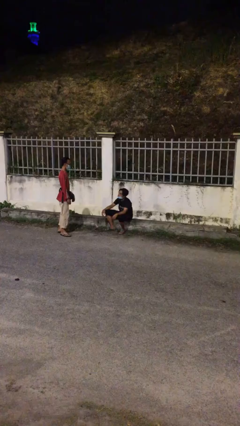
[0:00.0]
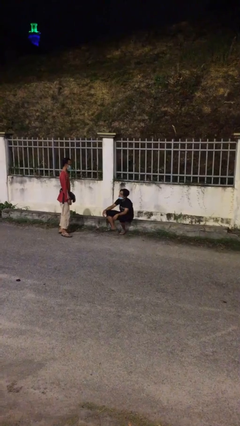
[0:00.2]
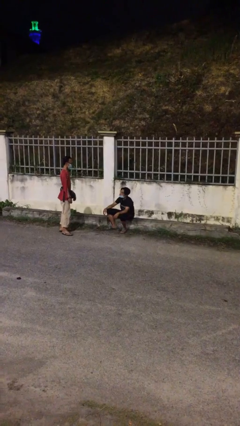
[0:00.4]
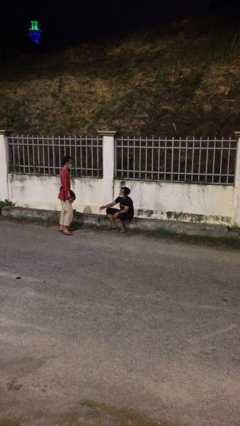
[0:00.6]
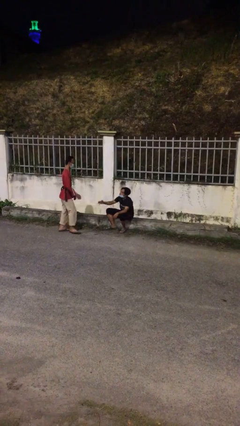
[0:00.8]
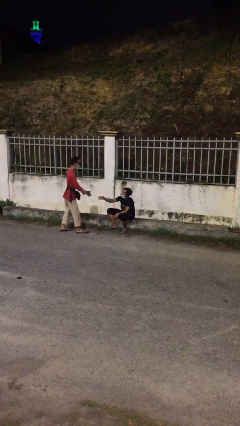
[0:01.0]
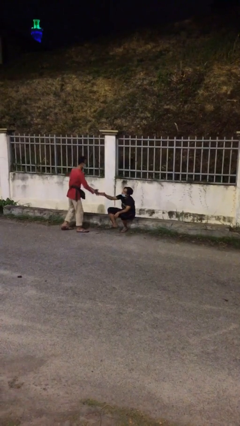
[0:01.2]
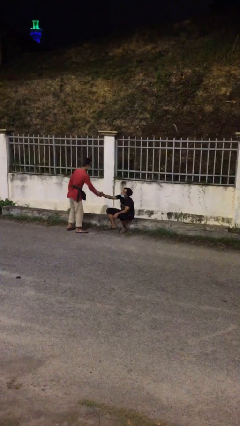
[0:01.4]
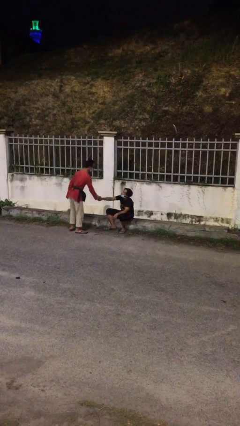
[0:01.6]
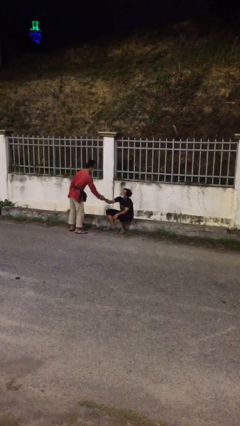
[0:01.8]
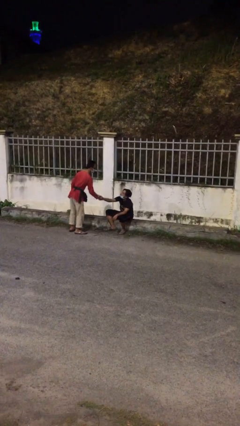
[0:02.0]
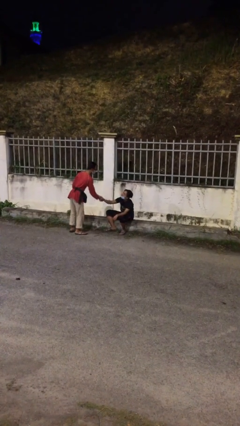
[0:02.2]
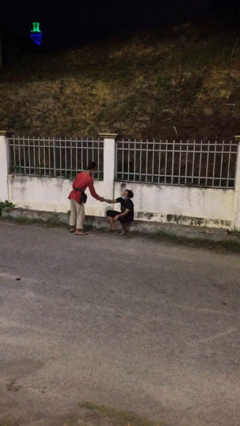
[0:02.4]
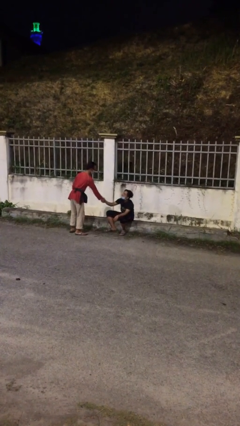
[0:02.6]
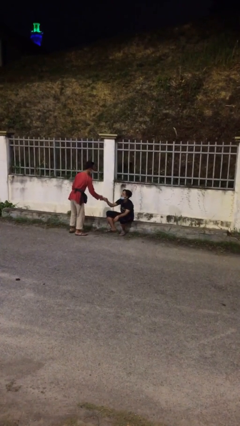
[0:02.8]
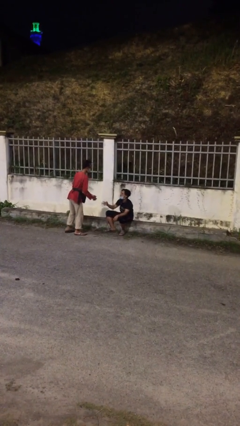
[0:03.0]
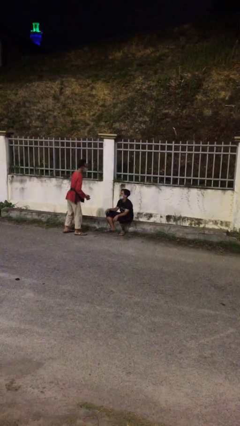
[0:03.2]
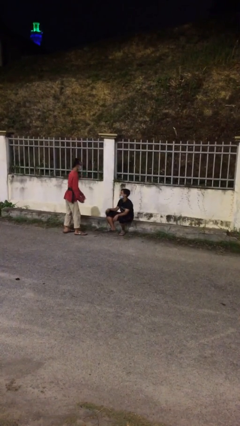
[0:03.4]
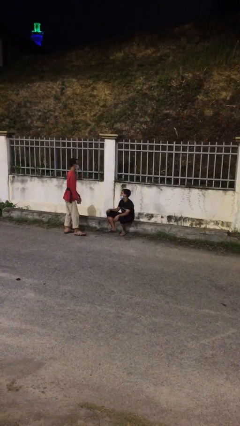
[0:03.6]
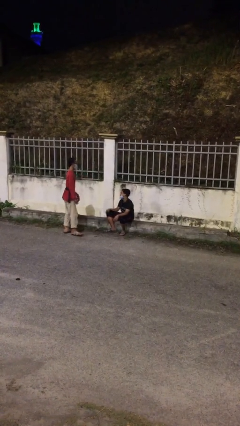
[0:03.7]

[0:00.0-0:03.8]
person shakes hand

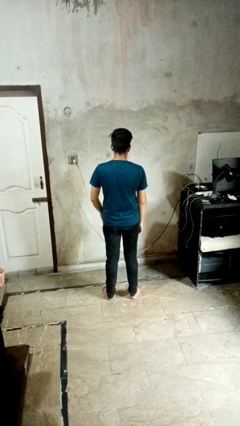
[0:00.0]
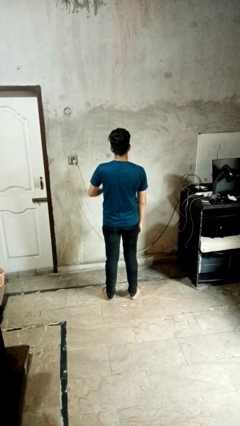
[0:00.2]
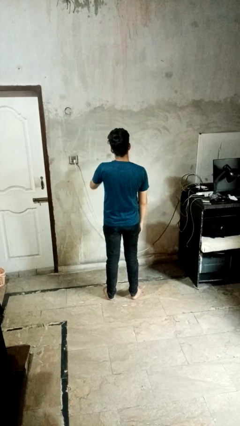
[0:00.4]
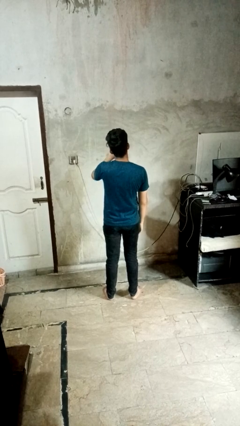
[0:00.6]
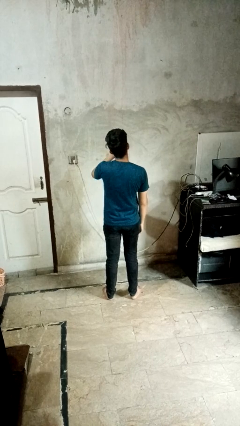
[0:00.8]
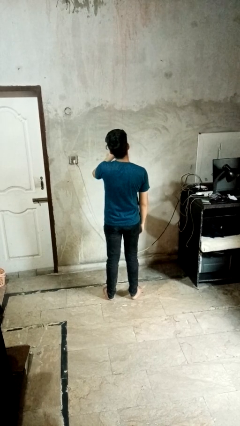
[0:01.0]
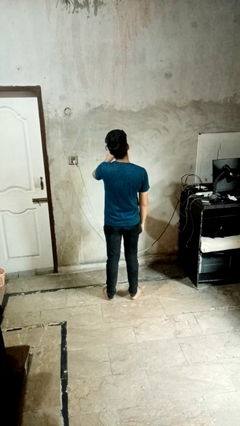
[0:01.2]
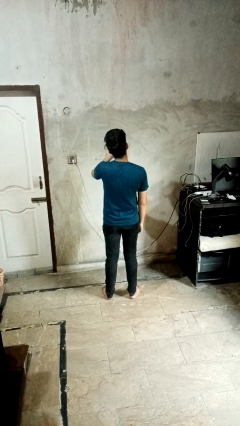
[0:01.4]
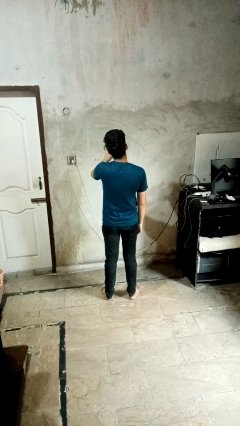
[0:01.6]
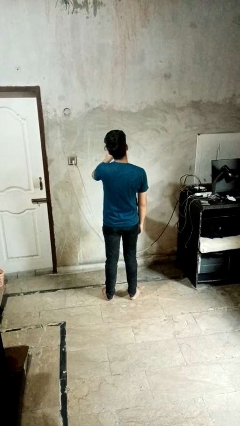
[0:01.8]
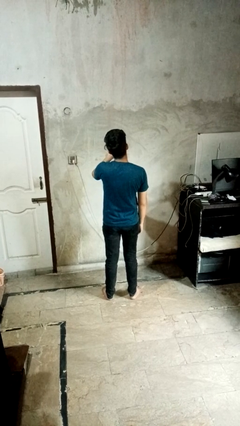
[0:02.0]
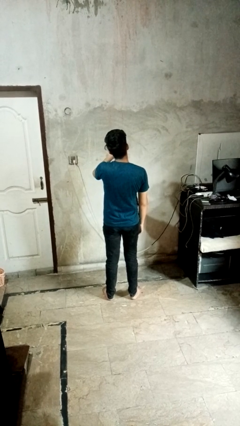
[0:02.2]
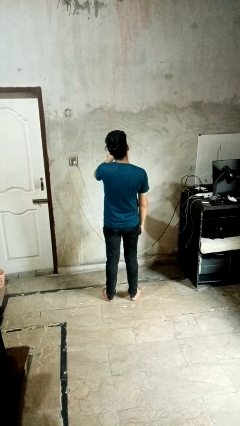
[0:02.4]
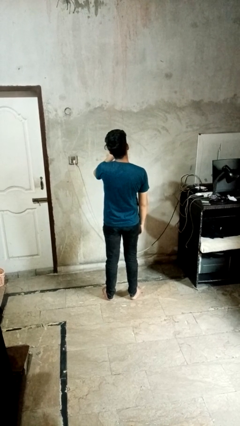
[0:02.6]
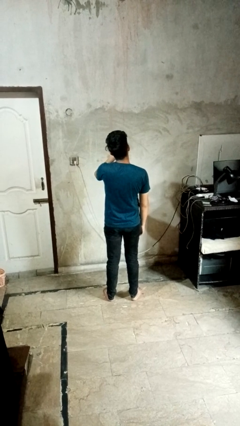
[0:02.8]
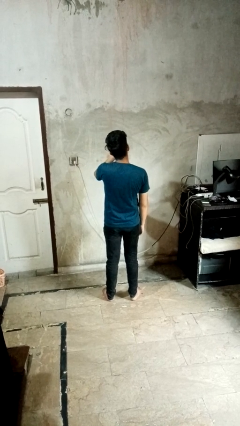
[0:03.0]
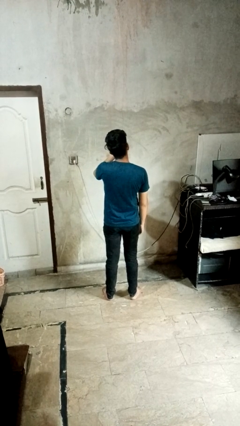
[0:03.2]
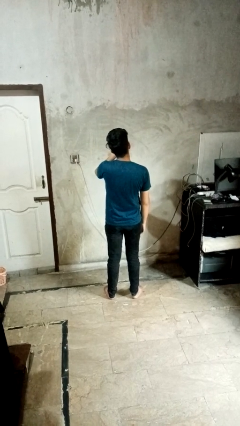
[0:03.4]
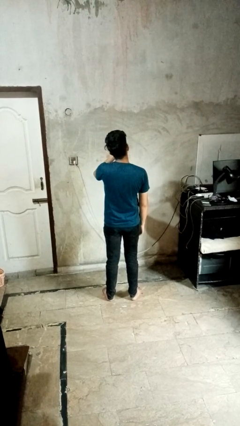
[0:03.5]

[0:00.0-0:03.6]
person yawns

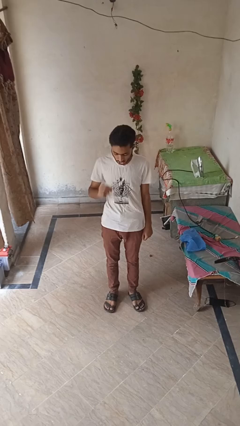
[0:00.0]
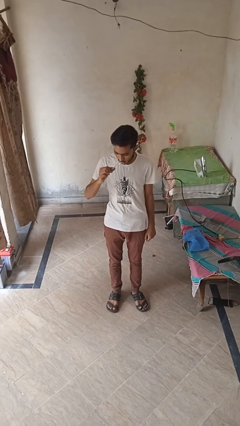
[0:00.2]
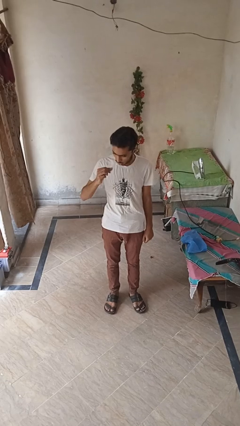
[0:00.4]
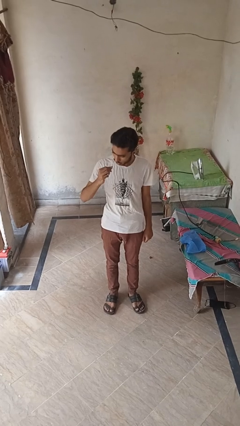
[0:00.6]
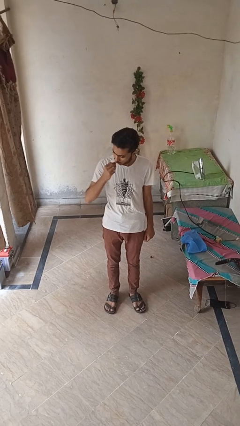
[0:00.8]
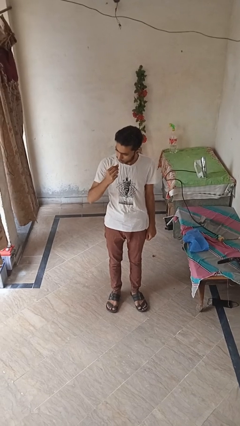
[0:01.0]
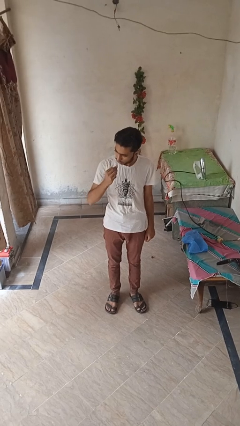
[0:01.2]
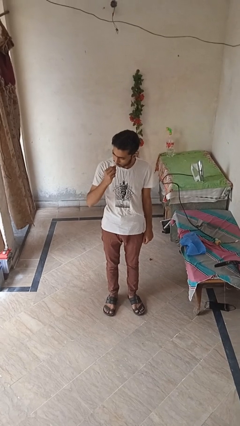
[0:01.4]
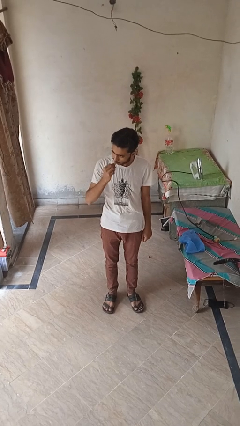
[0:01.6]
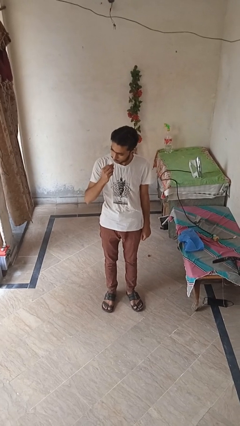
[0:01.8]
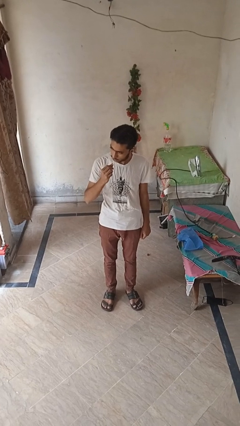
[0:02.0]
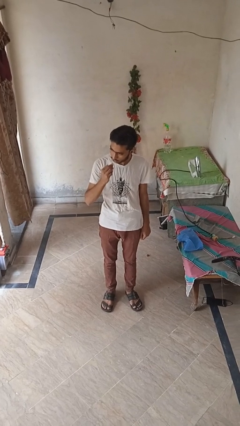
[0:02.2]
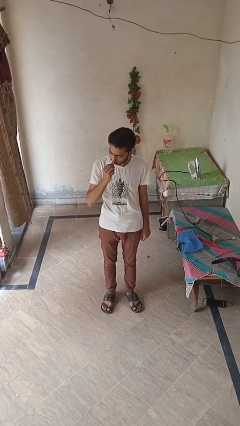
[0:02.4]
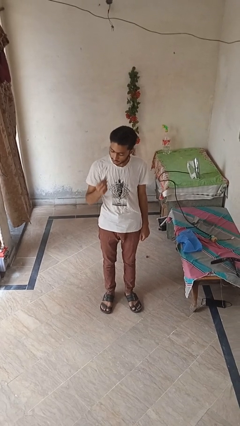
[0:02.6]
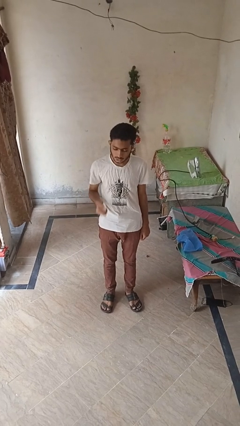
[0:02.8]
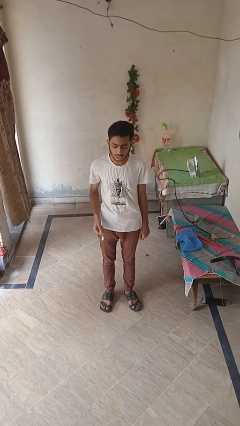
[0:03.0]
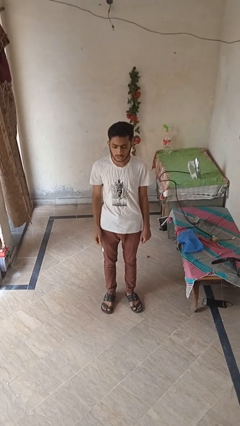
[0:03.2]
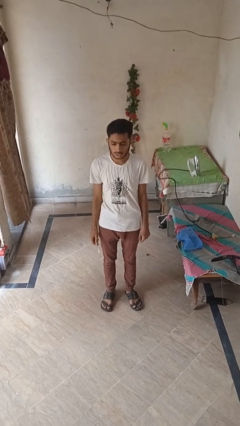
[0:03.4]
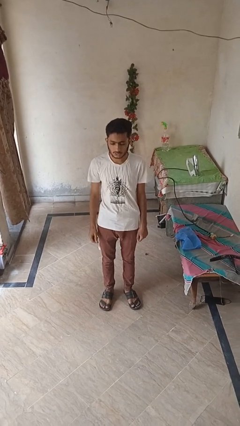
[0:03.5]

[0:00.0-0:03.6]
person brushes teeth

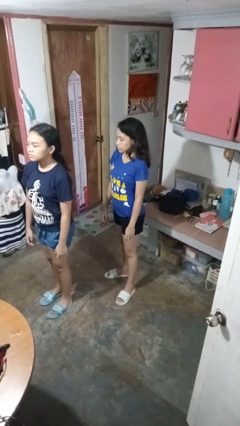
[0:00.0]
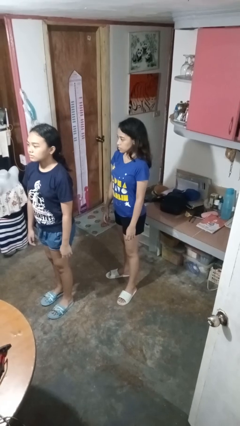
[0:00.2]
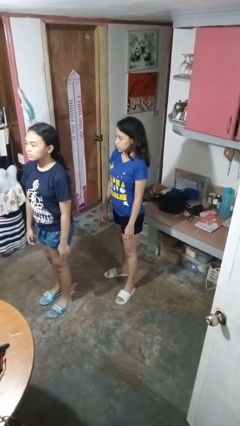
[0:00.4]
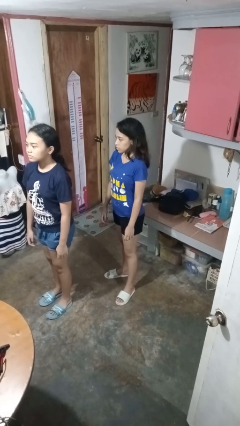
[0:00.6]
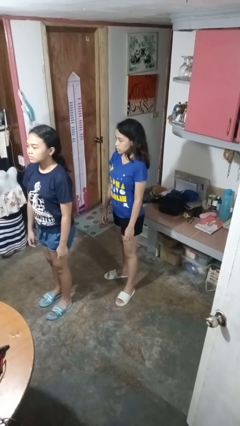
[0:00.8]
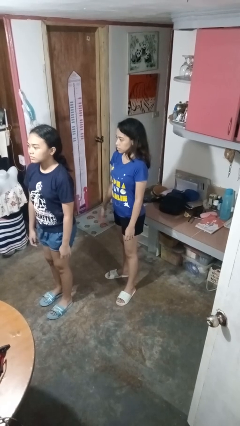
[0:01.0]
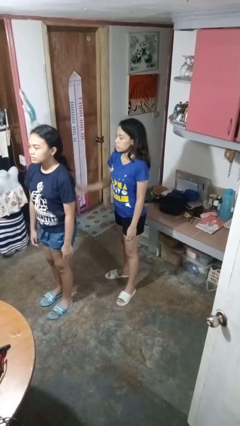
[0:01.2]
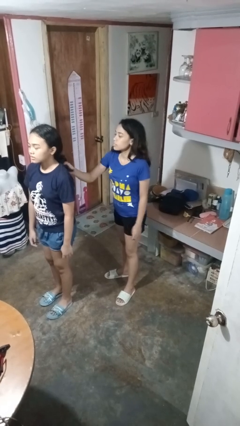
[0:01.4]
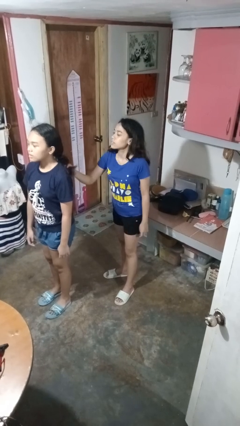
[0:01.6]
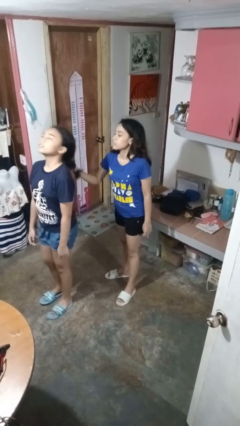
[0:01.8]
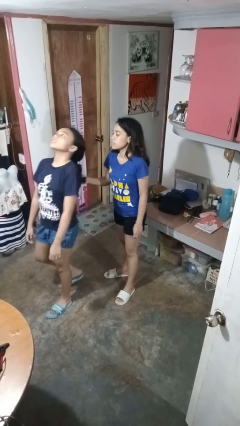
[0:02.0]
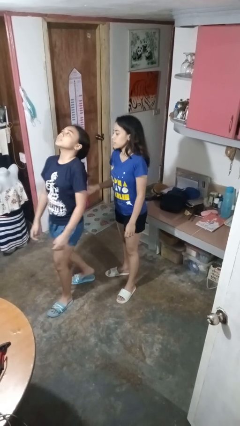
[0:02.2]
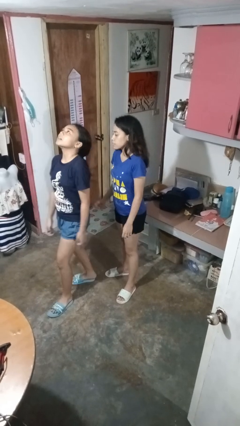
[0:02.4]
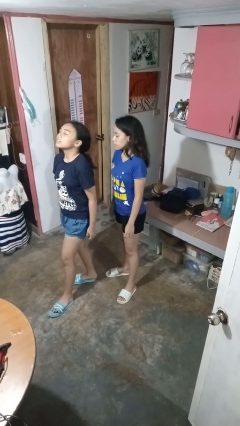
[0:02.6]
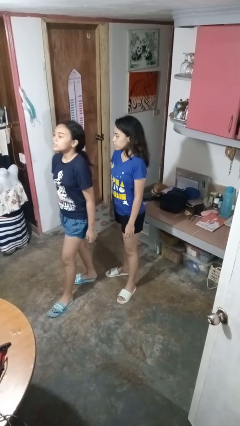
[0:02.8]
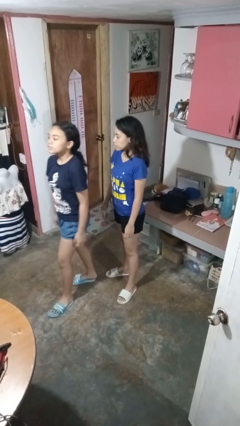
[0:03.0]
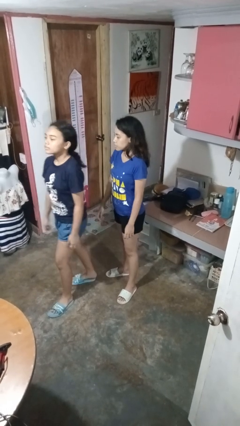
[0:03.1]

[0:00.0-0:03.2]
person grabs person by hair

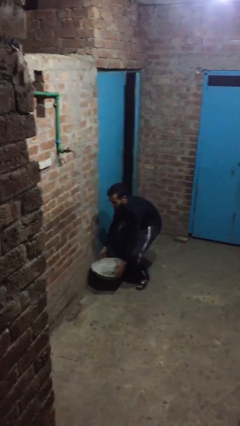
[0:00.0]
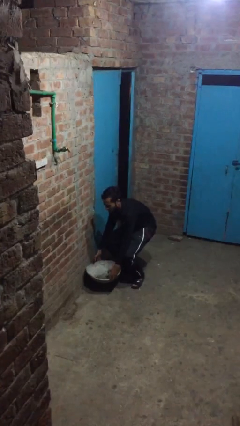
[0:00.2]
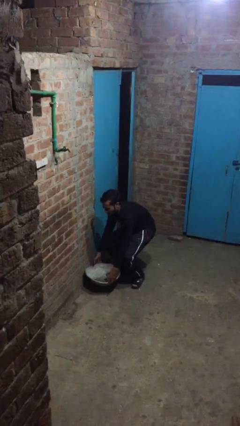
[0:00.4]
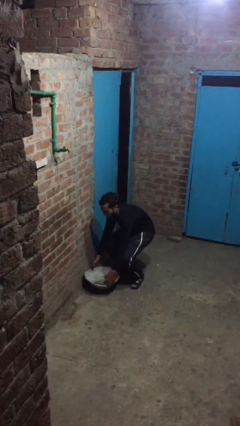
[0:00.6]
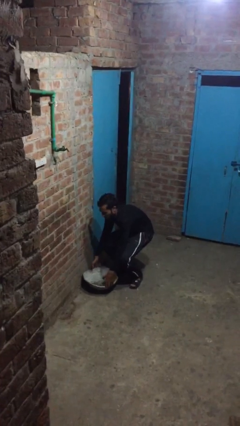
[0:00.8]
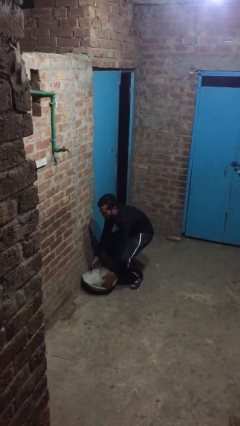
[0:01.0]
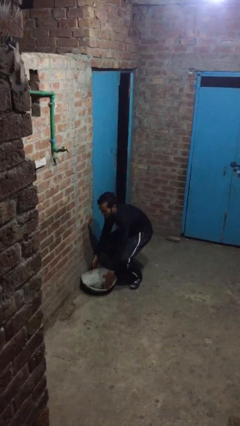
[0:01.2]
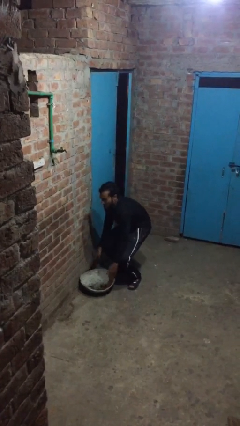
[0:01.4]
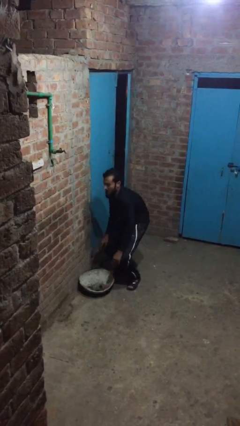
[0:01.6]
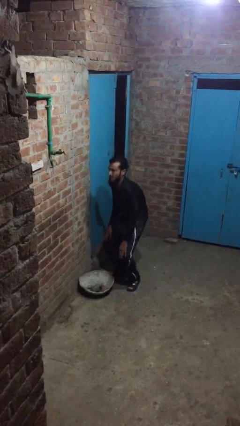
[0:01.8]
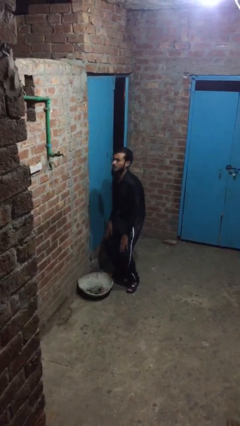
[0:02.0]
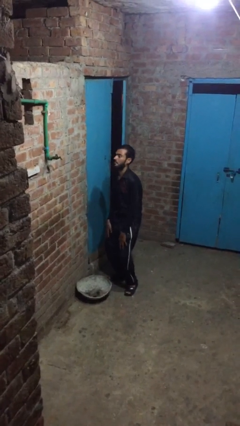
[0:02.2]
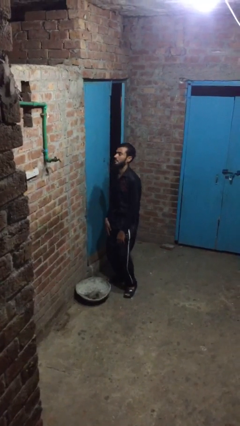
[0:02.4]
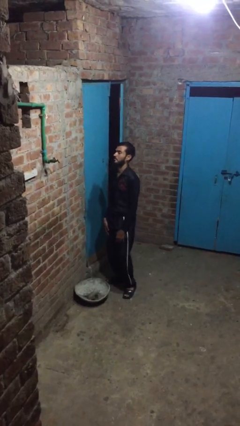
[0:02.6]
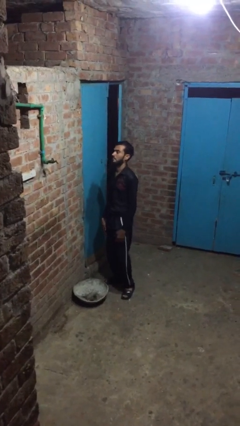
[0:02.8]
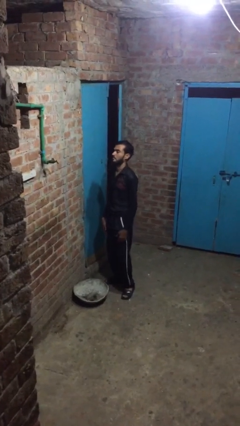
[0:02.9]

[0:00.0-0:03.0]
person puts down object on floor

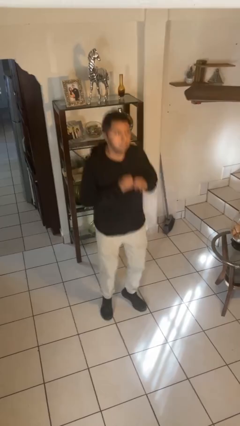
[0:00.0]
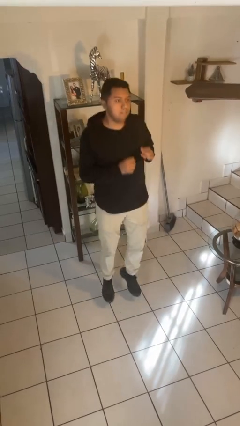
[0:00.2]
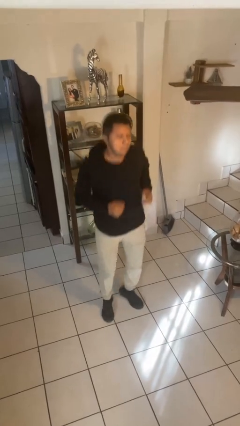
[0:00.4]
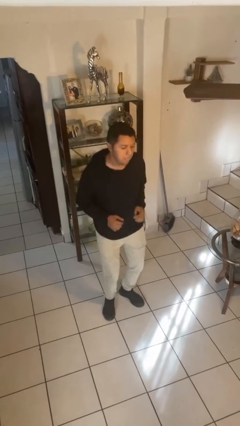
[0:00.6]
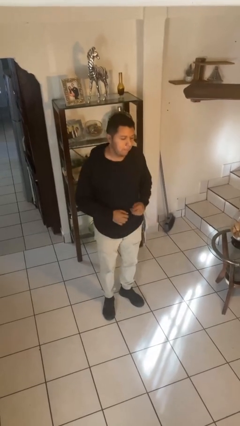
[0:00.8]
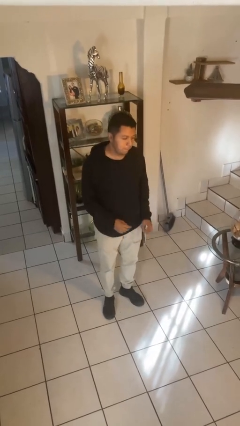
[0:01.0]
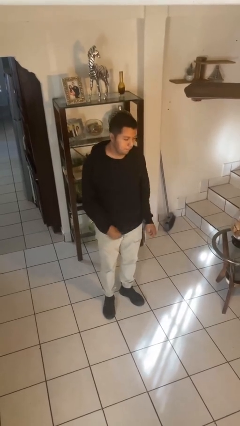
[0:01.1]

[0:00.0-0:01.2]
person jumps
